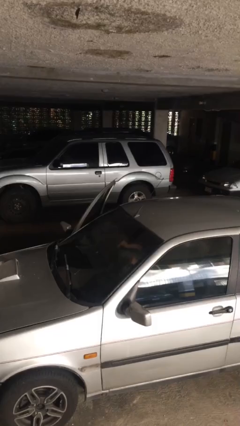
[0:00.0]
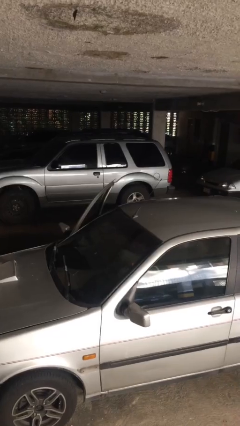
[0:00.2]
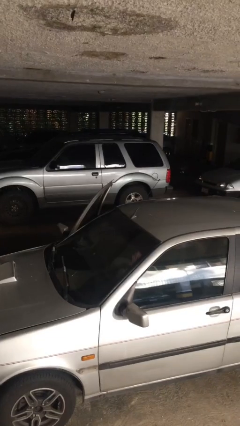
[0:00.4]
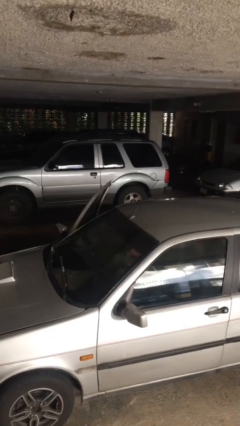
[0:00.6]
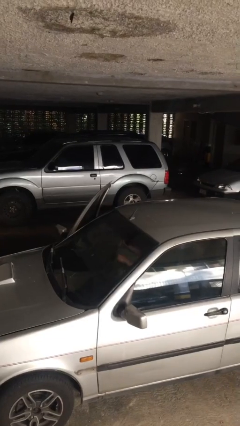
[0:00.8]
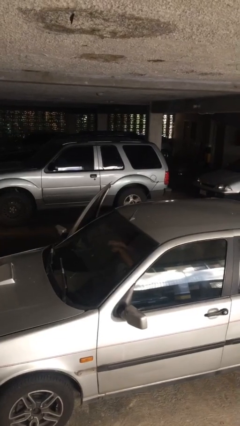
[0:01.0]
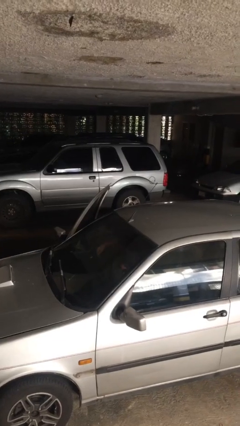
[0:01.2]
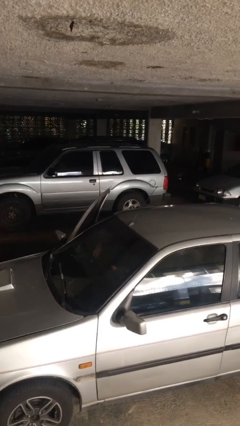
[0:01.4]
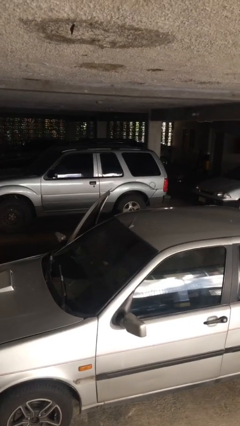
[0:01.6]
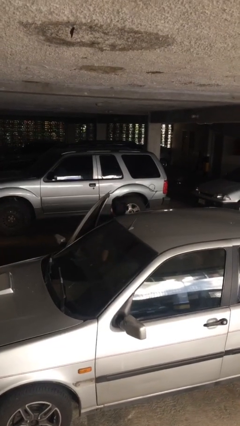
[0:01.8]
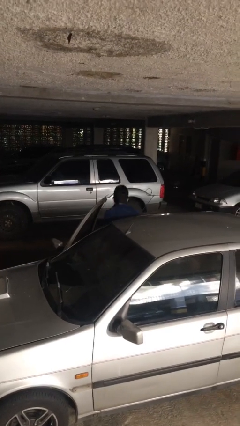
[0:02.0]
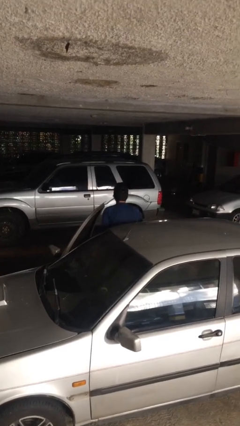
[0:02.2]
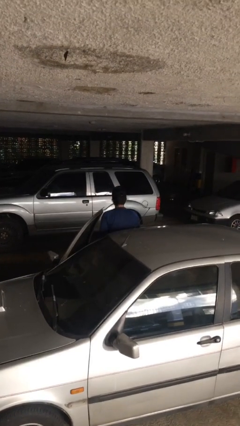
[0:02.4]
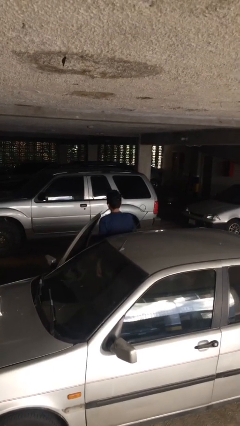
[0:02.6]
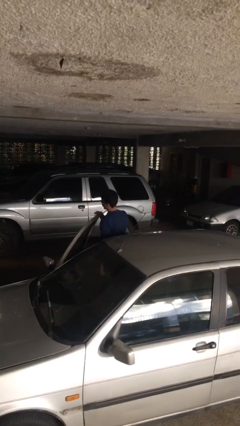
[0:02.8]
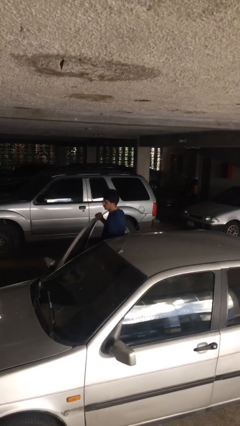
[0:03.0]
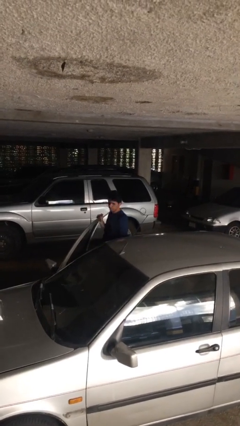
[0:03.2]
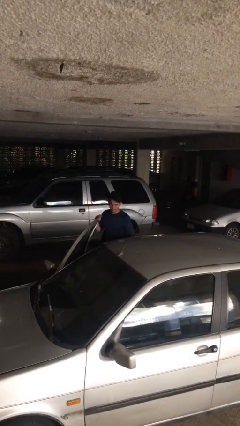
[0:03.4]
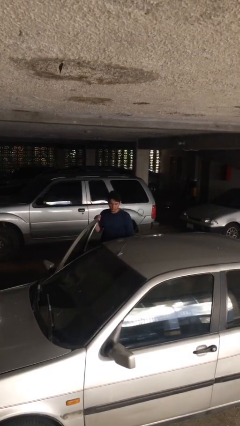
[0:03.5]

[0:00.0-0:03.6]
person exits car

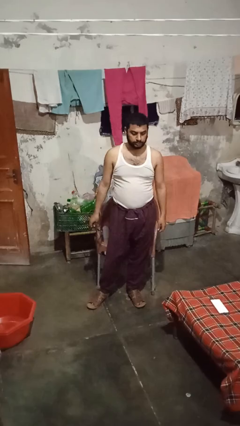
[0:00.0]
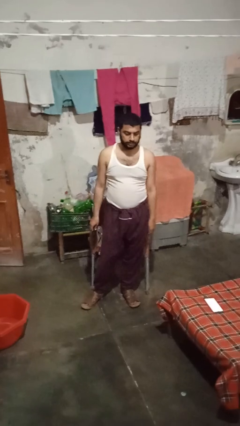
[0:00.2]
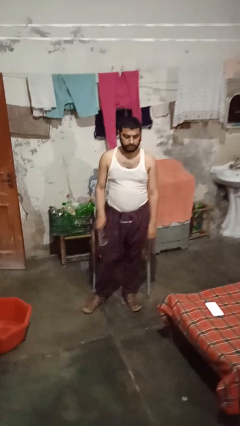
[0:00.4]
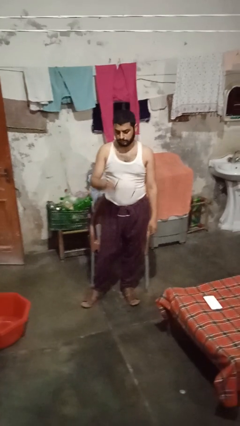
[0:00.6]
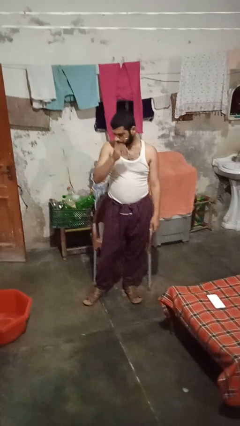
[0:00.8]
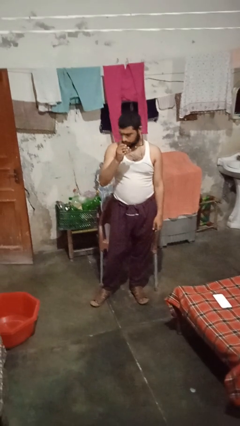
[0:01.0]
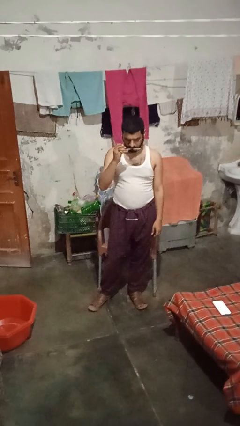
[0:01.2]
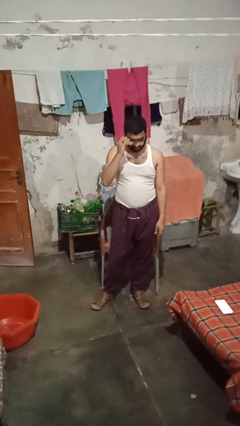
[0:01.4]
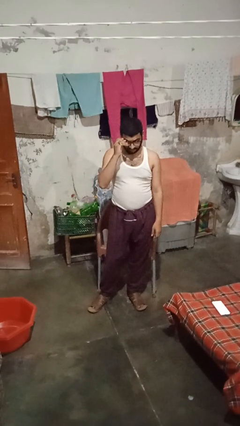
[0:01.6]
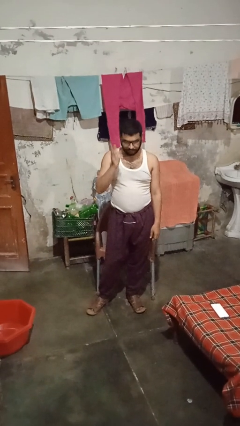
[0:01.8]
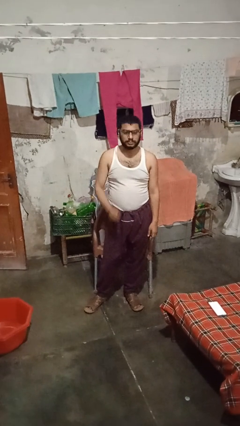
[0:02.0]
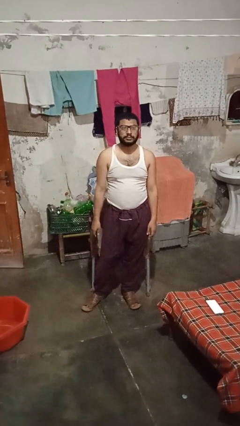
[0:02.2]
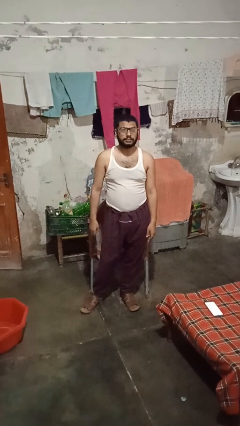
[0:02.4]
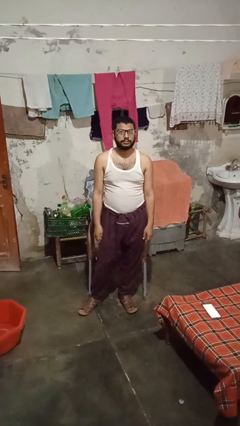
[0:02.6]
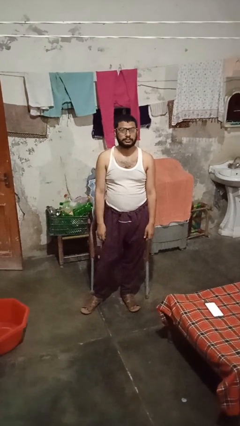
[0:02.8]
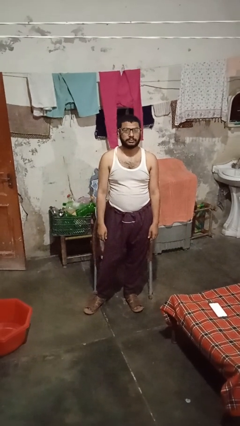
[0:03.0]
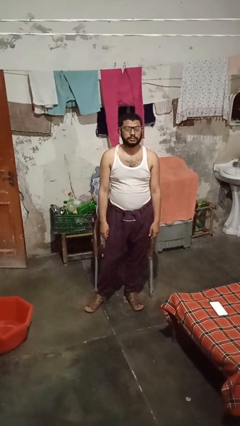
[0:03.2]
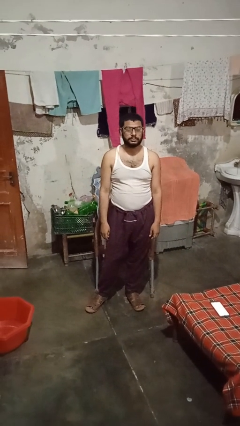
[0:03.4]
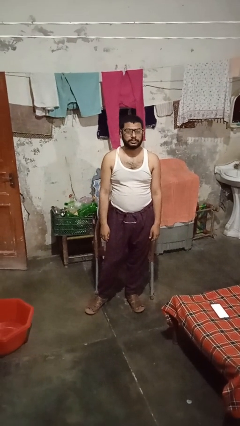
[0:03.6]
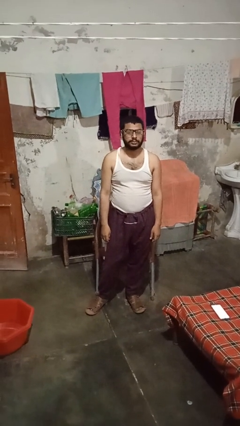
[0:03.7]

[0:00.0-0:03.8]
person puts on glasses

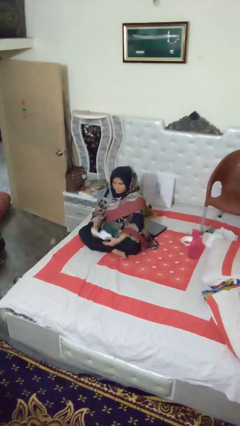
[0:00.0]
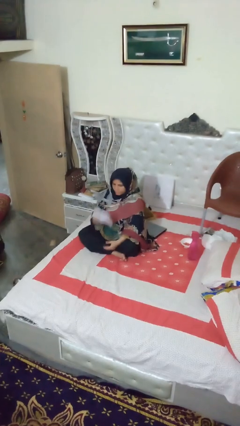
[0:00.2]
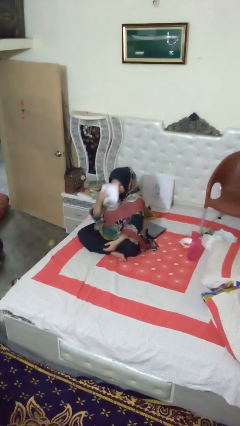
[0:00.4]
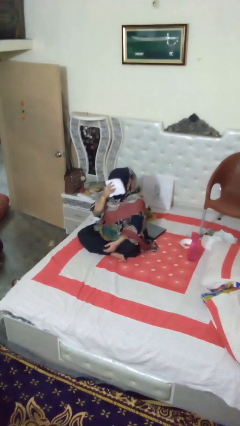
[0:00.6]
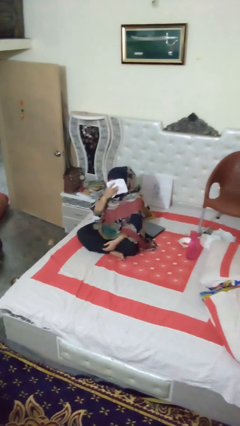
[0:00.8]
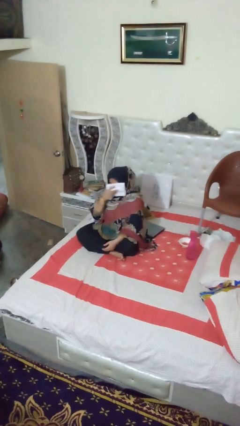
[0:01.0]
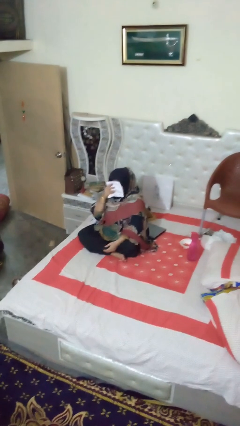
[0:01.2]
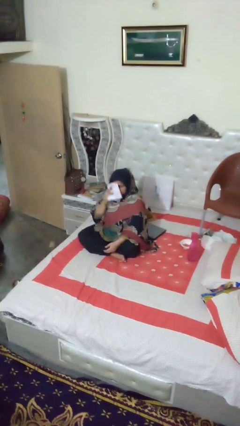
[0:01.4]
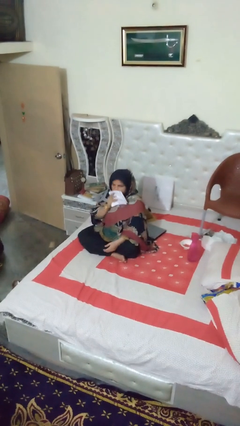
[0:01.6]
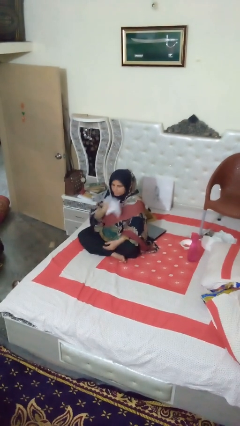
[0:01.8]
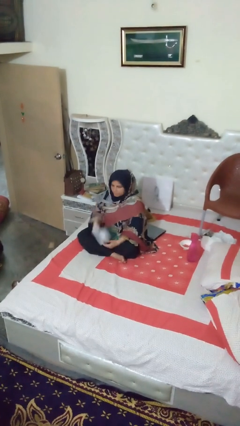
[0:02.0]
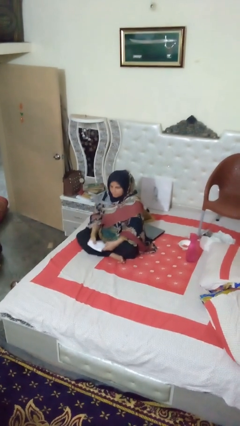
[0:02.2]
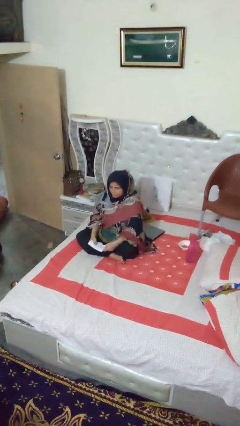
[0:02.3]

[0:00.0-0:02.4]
person wipes mouth with napkin

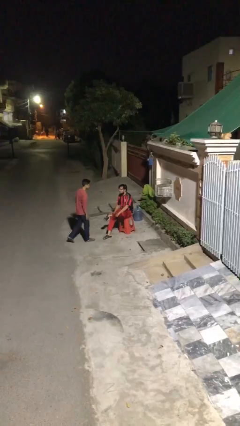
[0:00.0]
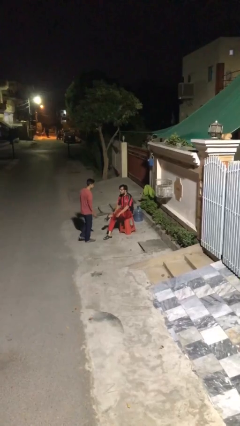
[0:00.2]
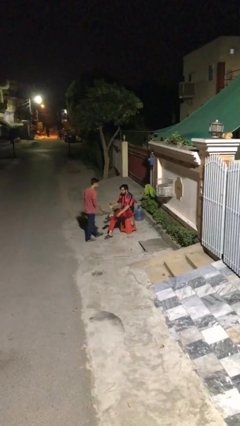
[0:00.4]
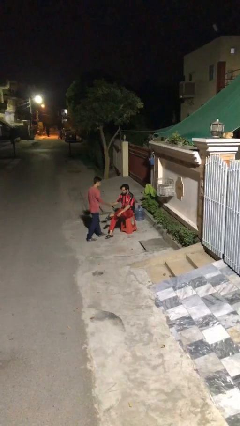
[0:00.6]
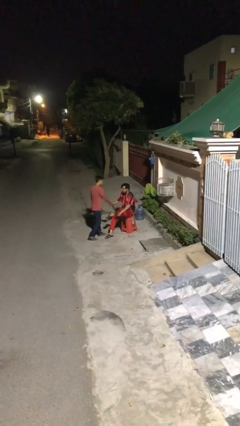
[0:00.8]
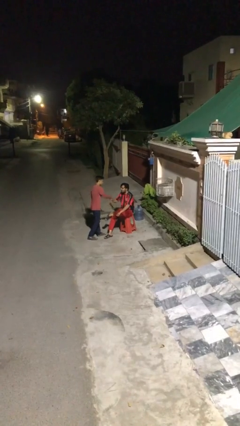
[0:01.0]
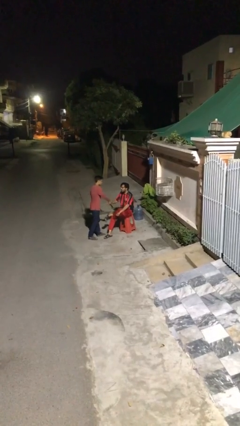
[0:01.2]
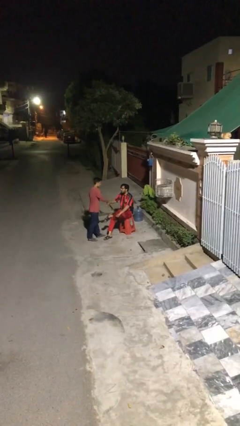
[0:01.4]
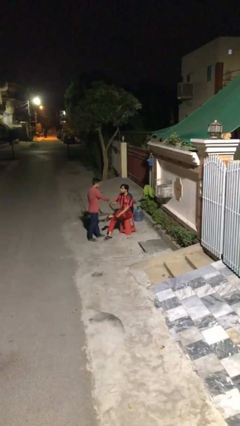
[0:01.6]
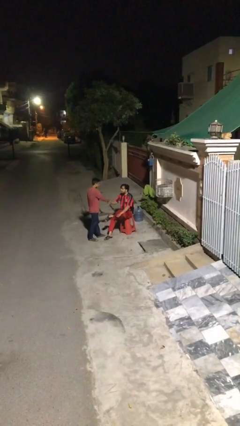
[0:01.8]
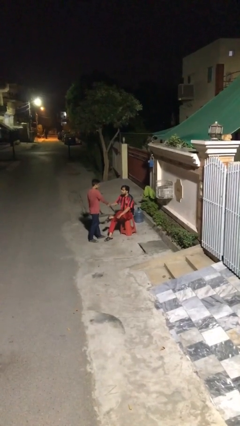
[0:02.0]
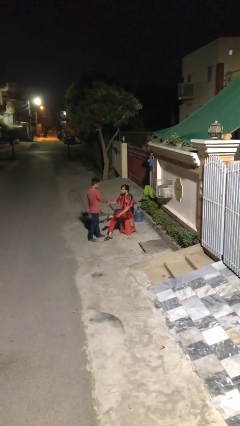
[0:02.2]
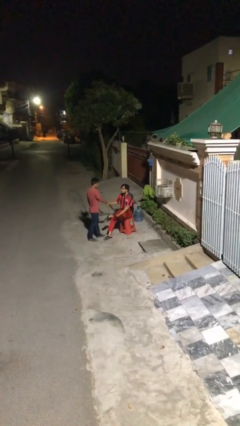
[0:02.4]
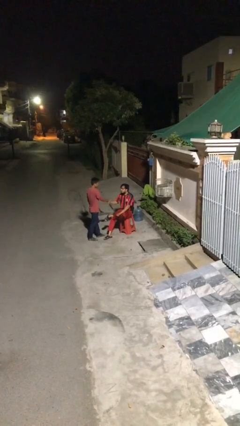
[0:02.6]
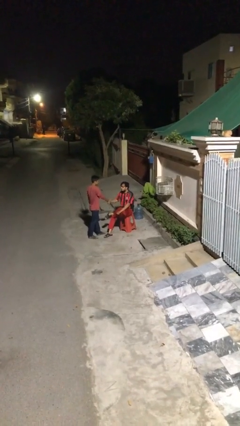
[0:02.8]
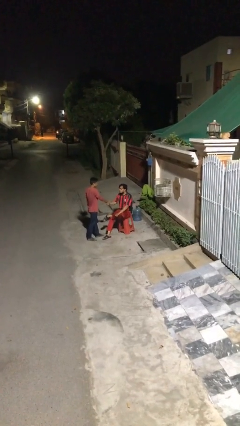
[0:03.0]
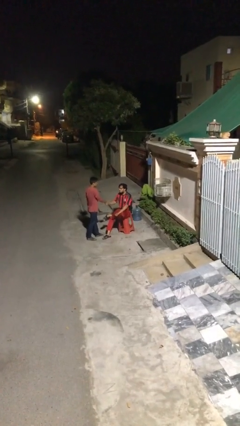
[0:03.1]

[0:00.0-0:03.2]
person shakes hand

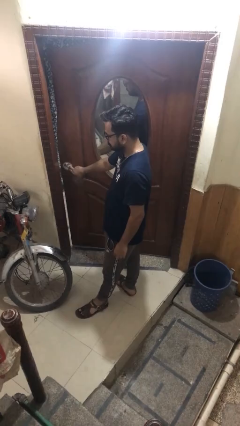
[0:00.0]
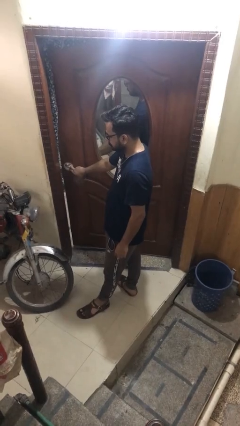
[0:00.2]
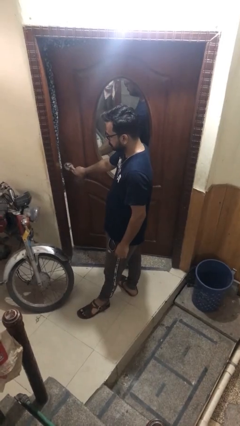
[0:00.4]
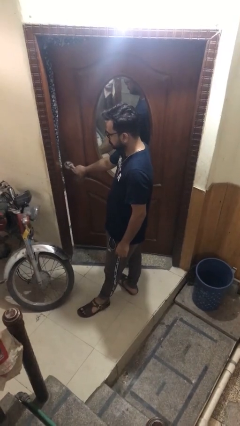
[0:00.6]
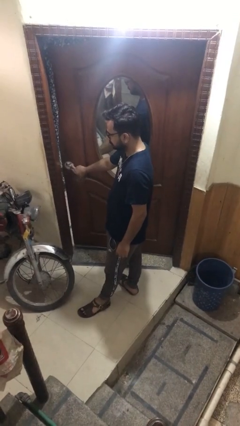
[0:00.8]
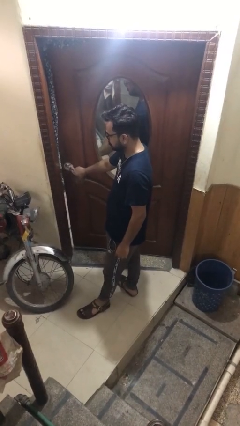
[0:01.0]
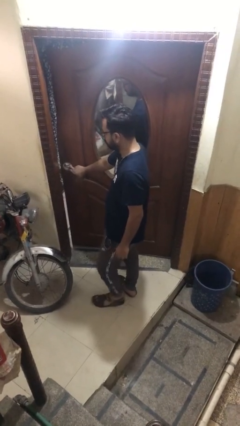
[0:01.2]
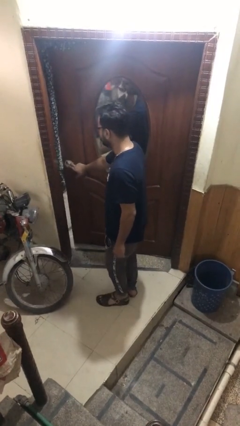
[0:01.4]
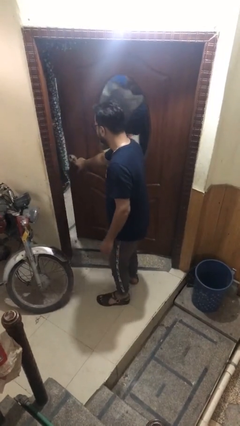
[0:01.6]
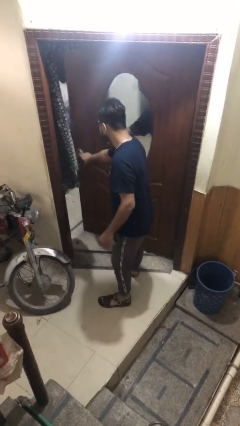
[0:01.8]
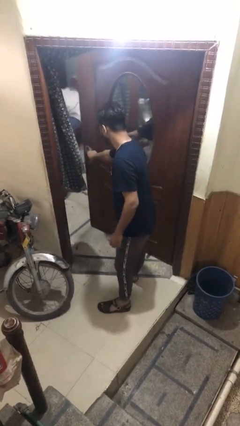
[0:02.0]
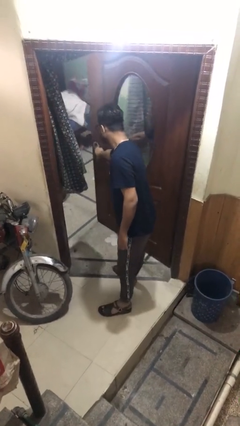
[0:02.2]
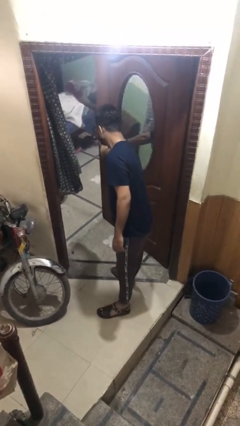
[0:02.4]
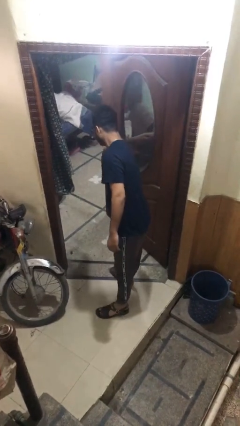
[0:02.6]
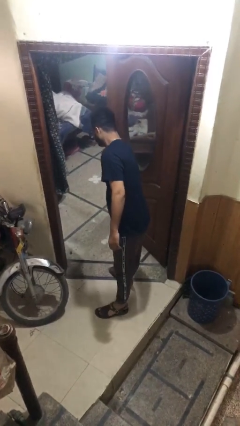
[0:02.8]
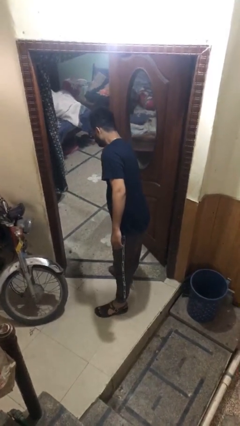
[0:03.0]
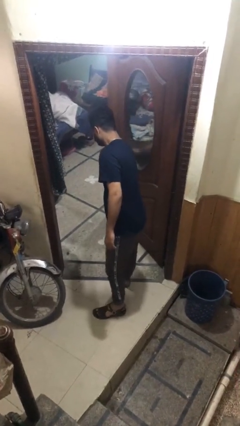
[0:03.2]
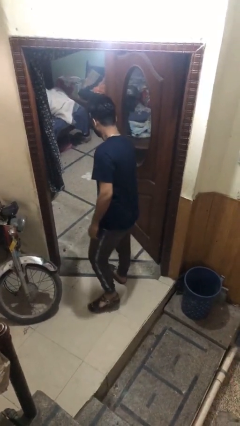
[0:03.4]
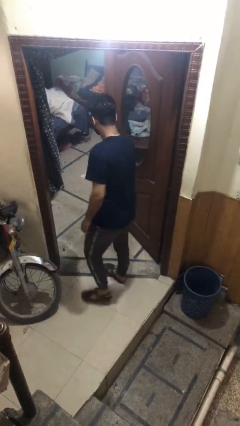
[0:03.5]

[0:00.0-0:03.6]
person opens facility door

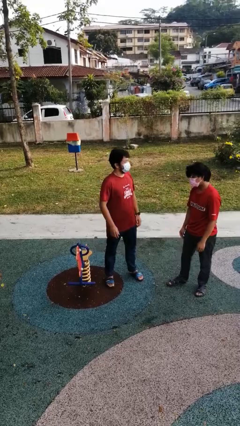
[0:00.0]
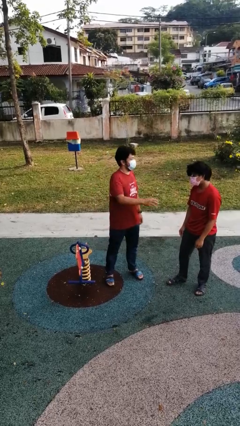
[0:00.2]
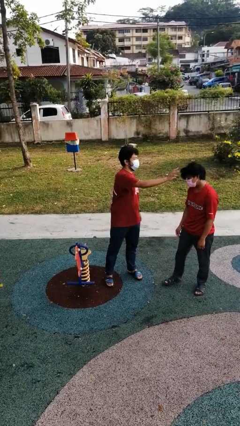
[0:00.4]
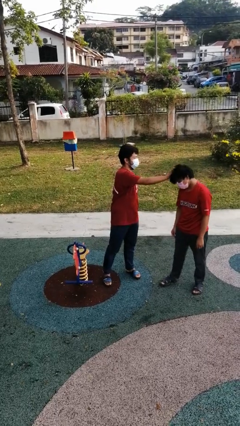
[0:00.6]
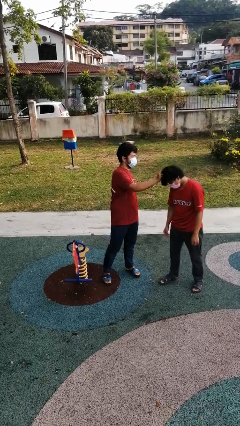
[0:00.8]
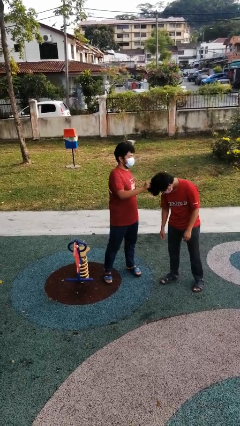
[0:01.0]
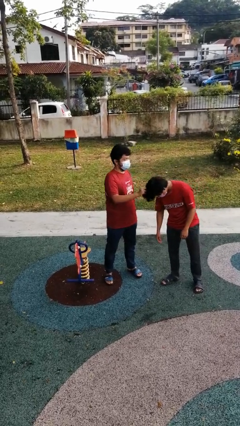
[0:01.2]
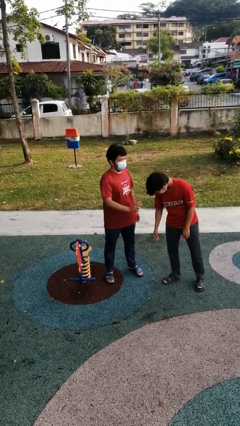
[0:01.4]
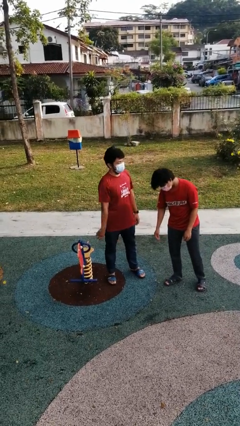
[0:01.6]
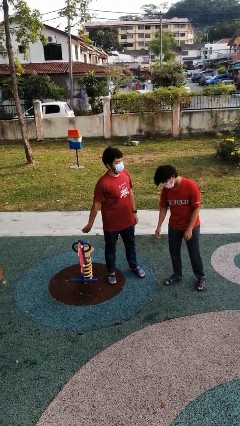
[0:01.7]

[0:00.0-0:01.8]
person grabs person by hair
